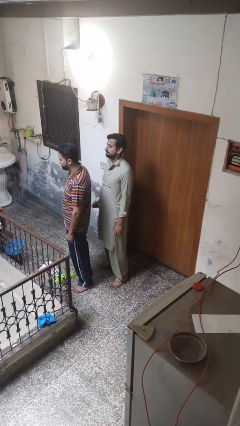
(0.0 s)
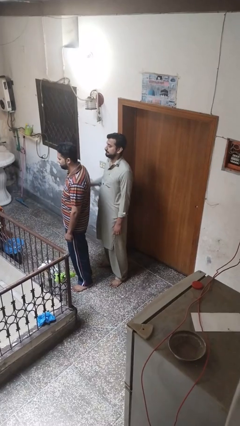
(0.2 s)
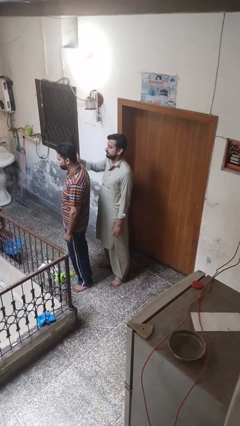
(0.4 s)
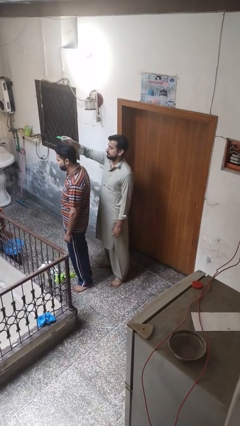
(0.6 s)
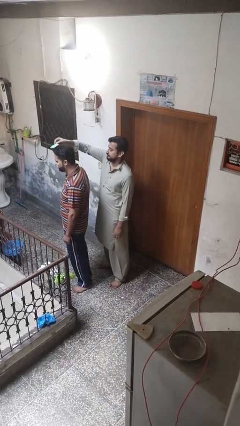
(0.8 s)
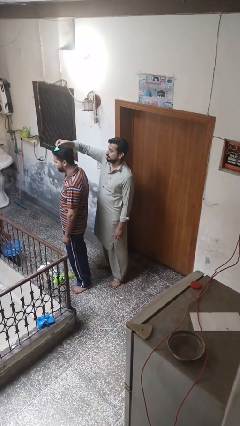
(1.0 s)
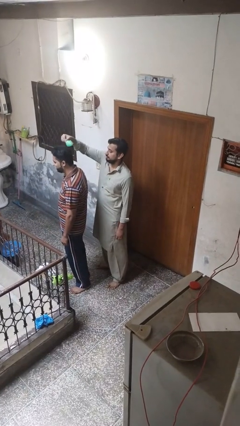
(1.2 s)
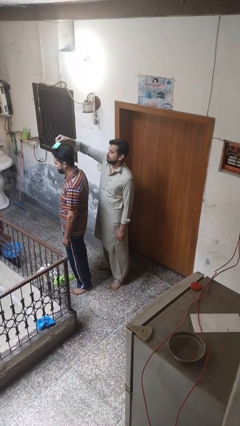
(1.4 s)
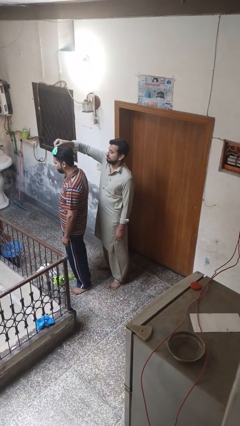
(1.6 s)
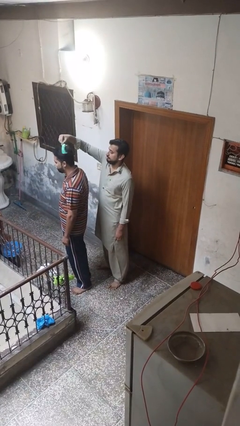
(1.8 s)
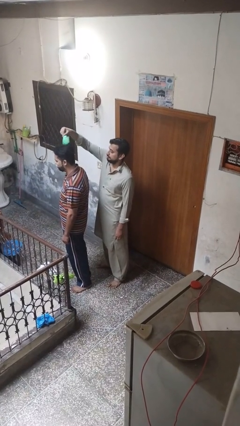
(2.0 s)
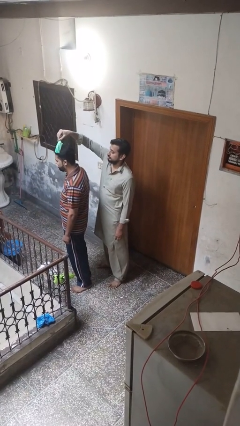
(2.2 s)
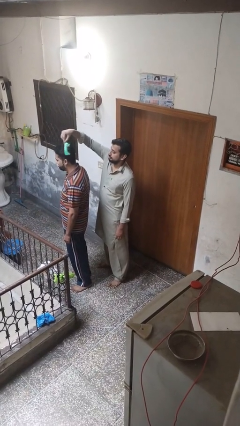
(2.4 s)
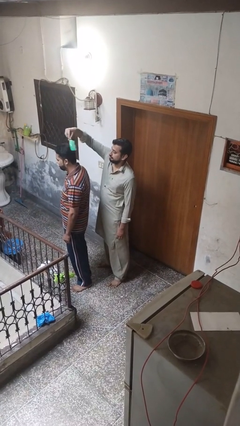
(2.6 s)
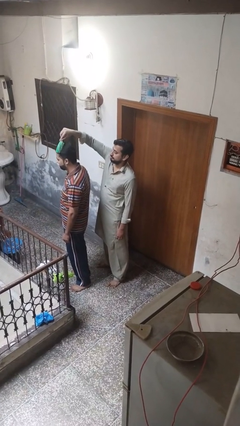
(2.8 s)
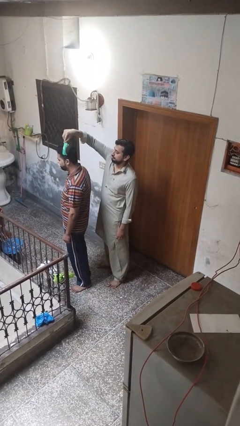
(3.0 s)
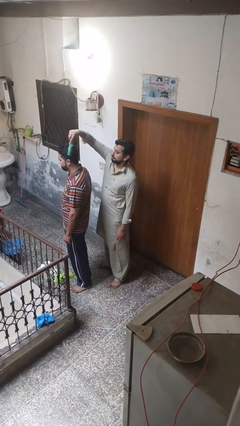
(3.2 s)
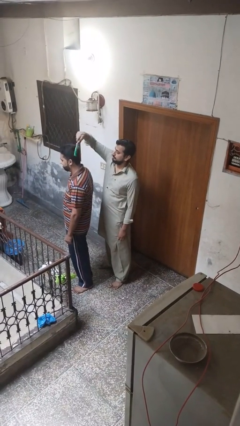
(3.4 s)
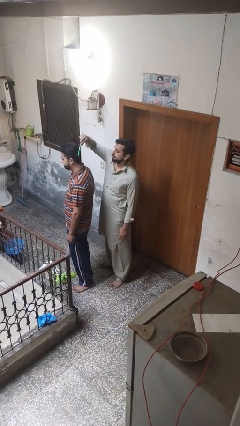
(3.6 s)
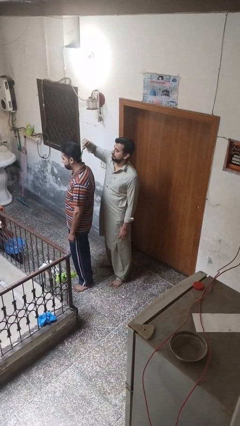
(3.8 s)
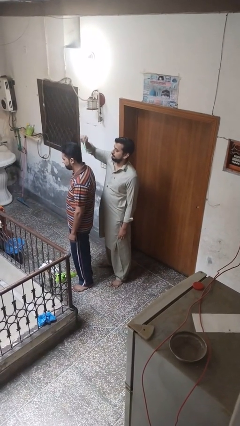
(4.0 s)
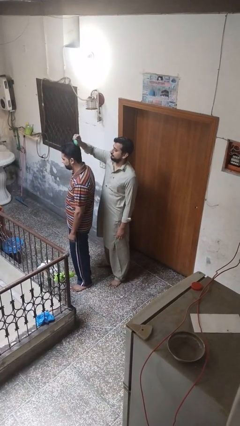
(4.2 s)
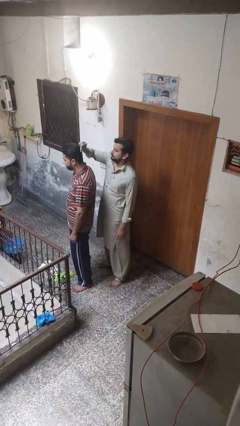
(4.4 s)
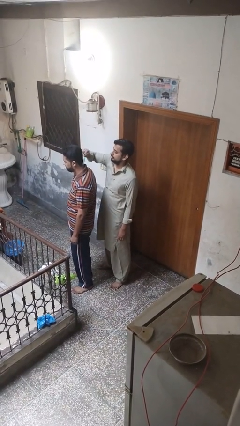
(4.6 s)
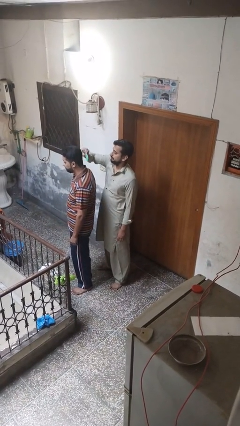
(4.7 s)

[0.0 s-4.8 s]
person brushes hair of person

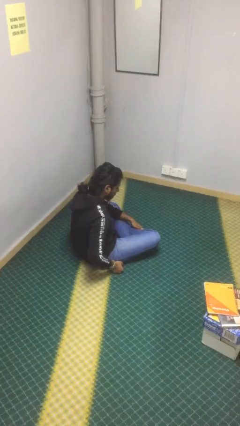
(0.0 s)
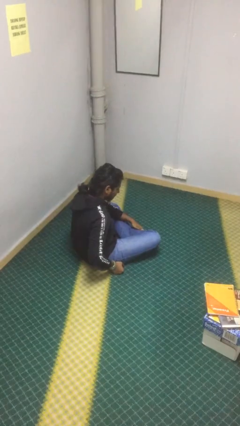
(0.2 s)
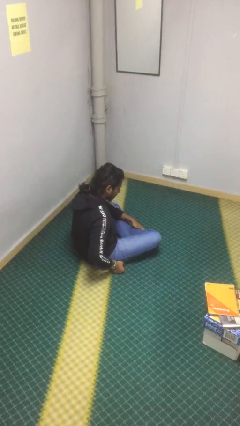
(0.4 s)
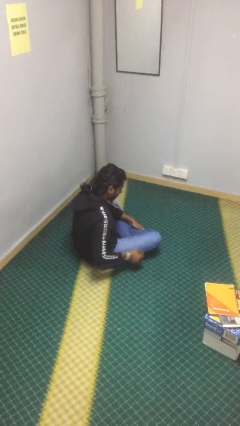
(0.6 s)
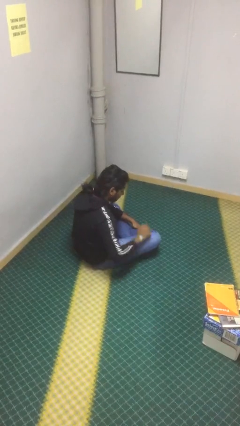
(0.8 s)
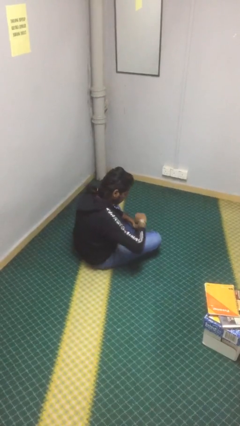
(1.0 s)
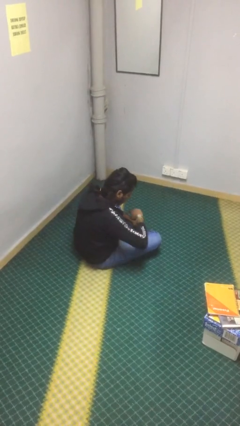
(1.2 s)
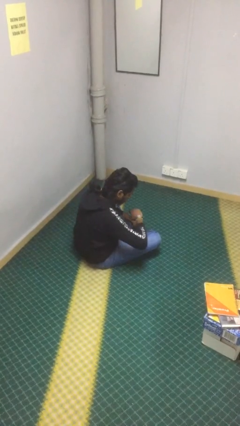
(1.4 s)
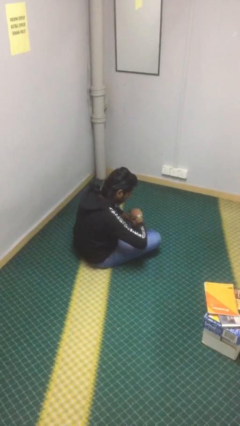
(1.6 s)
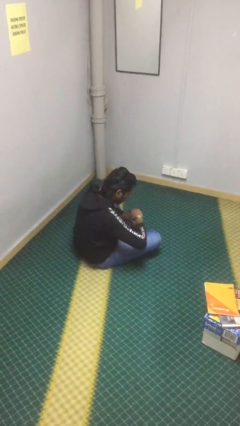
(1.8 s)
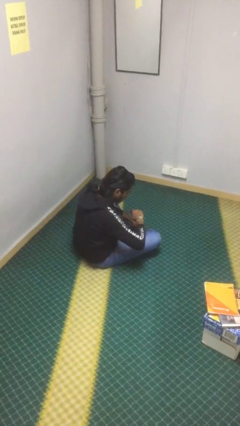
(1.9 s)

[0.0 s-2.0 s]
person looks at wristwatch

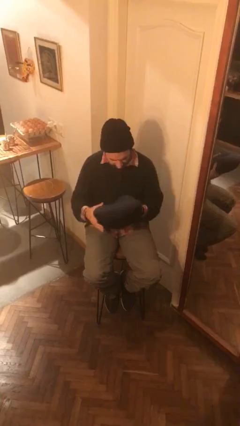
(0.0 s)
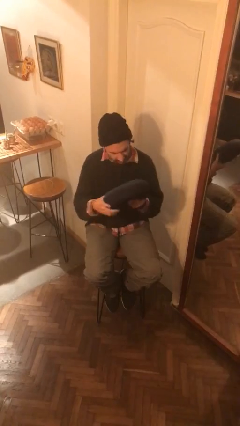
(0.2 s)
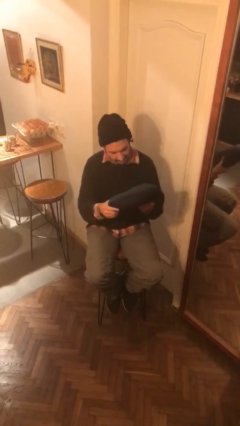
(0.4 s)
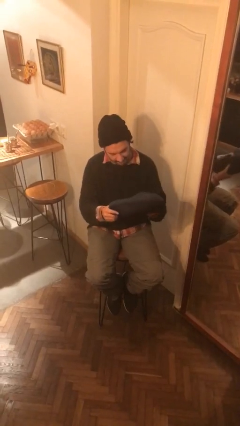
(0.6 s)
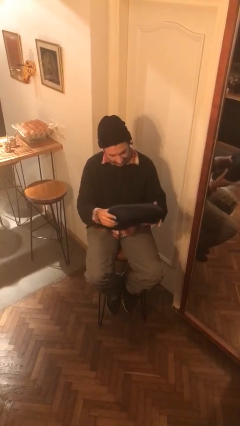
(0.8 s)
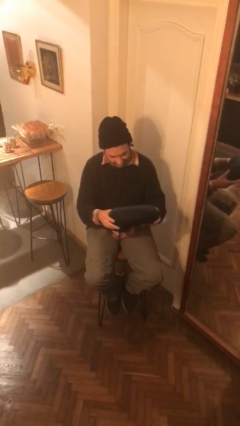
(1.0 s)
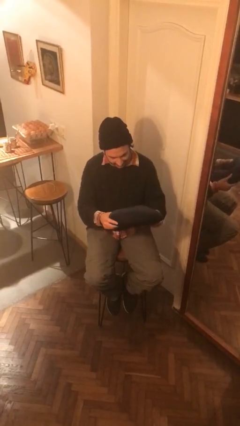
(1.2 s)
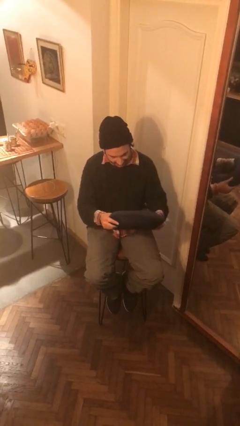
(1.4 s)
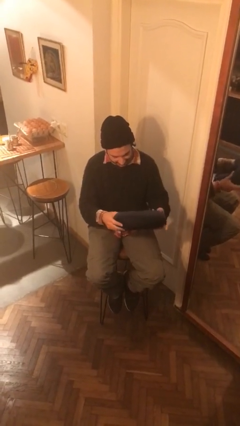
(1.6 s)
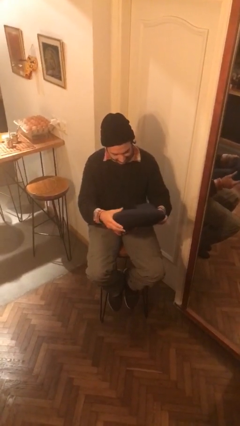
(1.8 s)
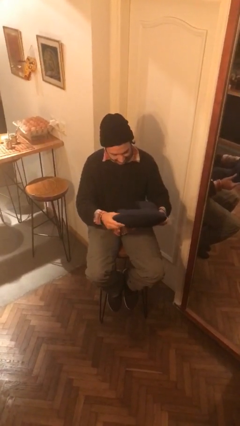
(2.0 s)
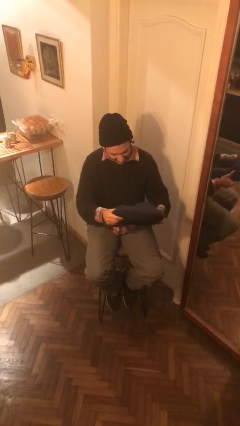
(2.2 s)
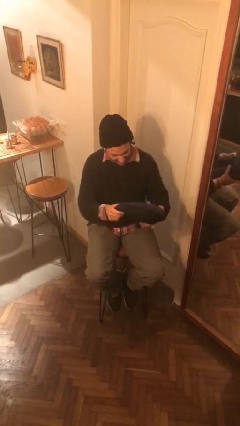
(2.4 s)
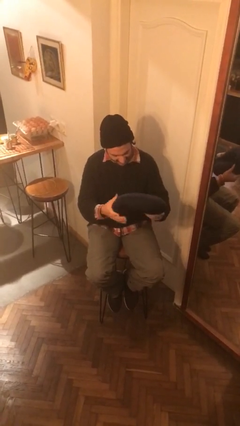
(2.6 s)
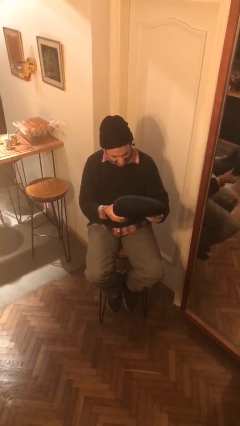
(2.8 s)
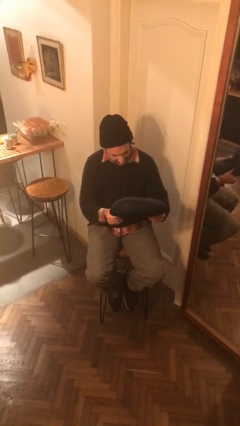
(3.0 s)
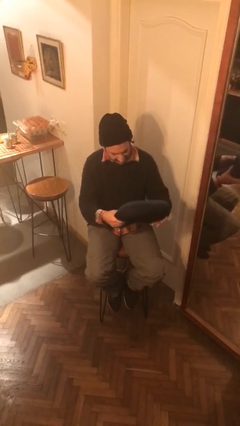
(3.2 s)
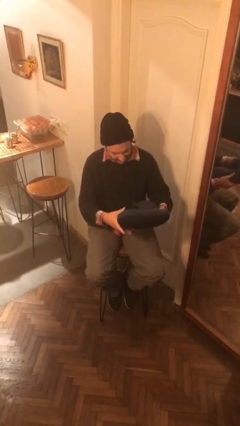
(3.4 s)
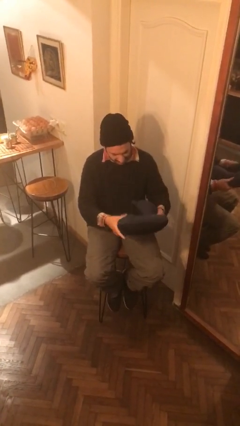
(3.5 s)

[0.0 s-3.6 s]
person squeezes object

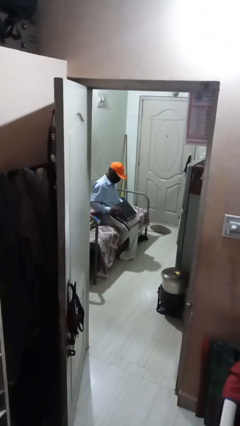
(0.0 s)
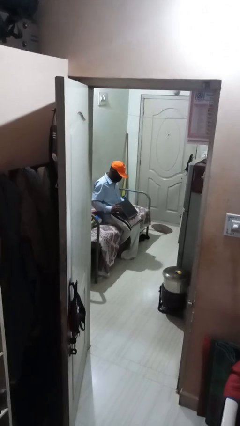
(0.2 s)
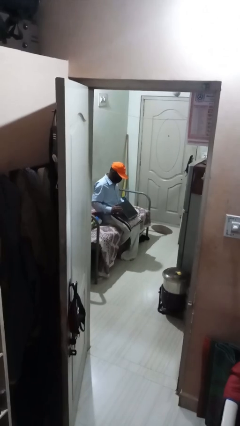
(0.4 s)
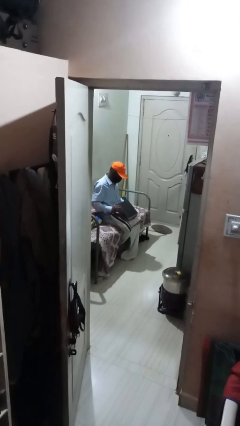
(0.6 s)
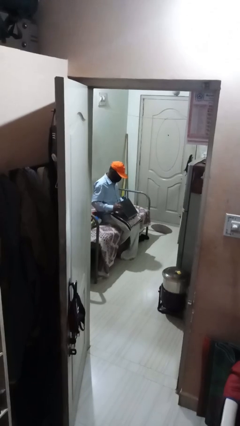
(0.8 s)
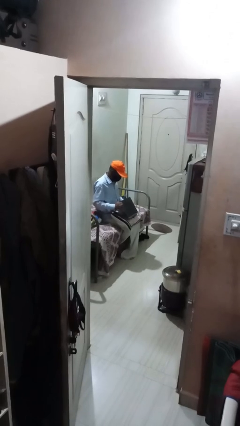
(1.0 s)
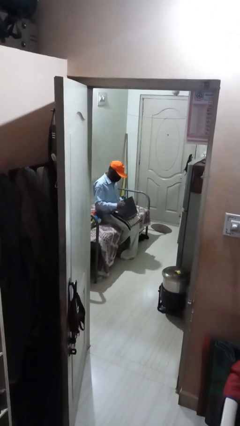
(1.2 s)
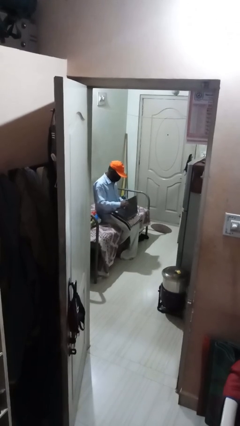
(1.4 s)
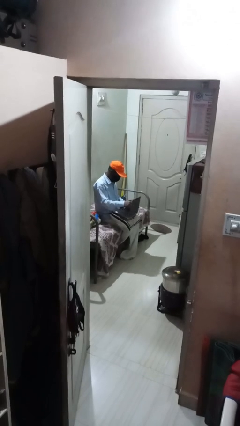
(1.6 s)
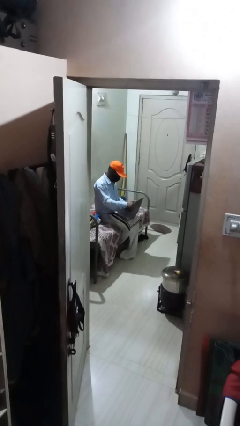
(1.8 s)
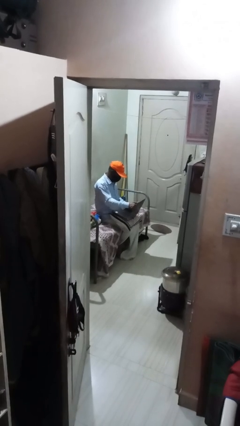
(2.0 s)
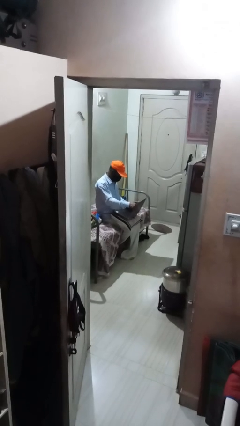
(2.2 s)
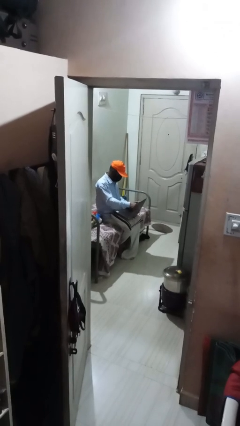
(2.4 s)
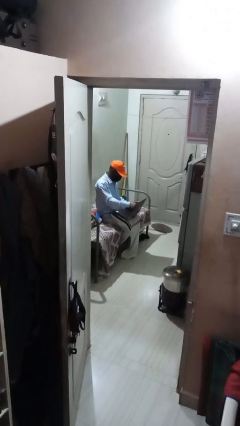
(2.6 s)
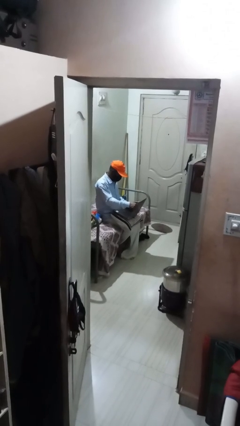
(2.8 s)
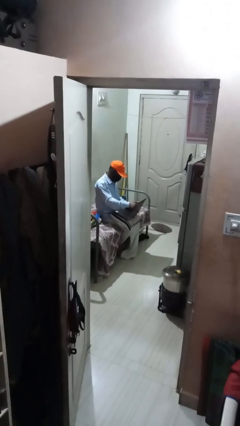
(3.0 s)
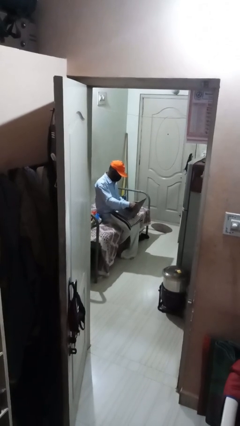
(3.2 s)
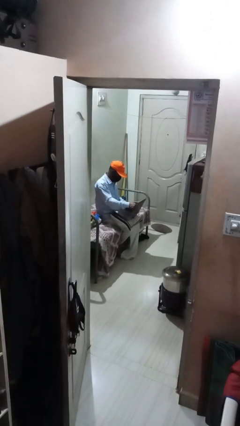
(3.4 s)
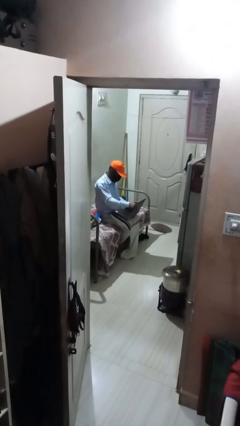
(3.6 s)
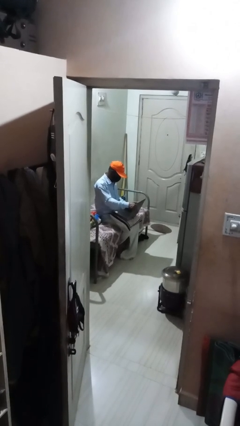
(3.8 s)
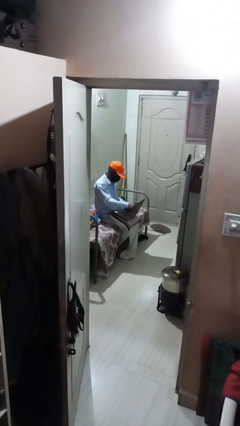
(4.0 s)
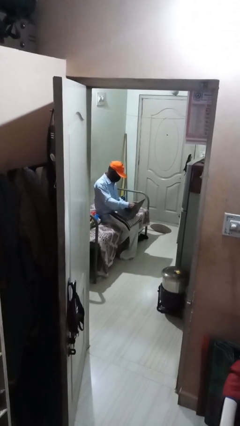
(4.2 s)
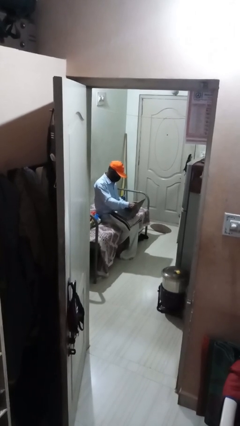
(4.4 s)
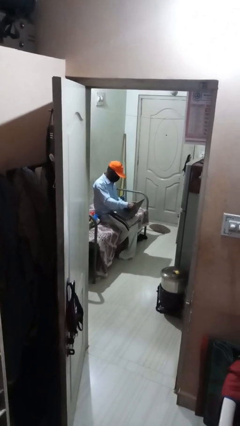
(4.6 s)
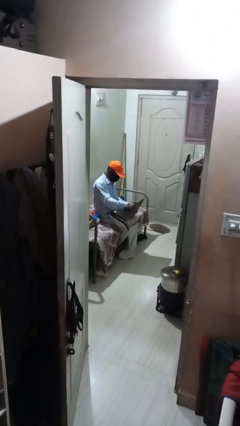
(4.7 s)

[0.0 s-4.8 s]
person interacts with laptop

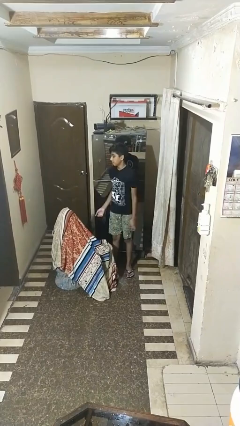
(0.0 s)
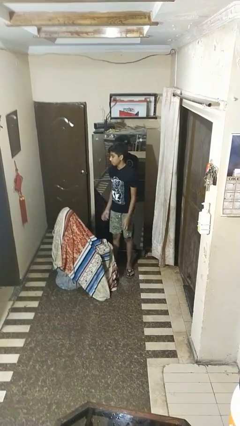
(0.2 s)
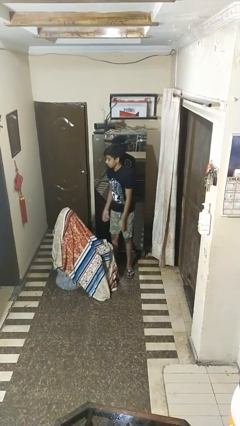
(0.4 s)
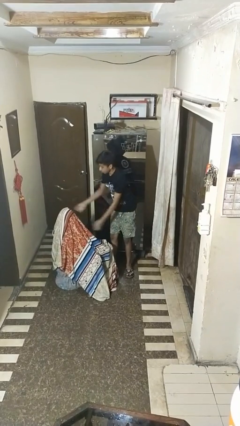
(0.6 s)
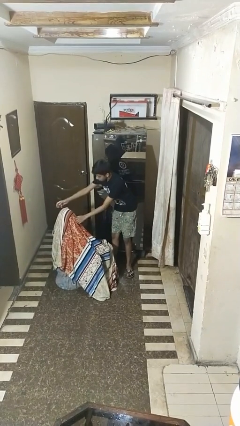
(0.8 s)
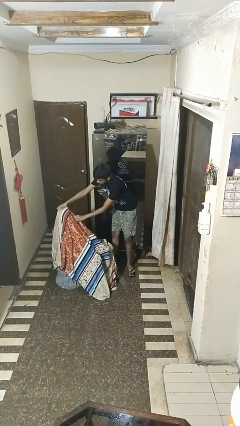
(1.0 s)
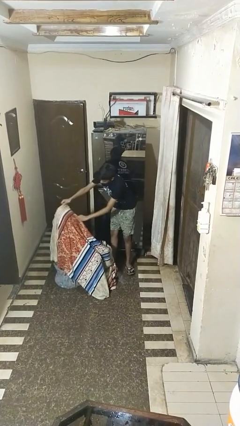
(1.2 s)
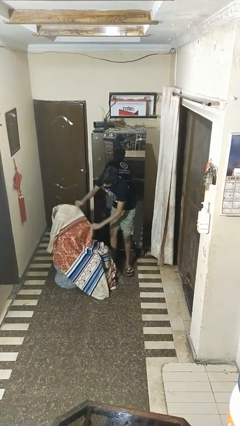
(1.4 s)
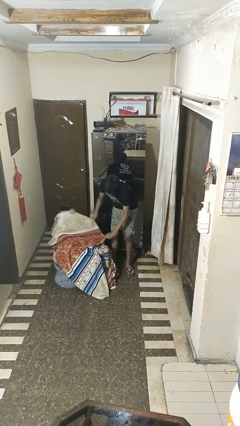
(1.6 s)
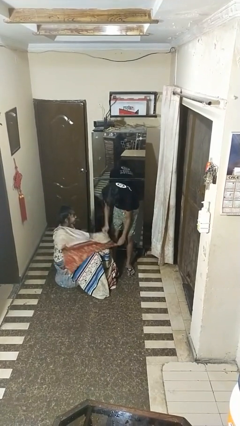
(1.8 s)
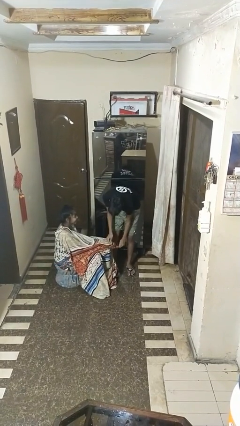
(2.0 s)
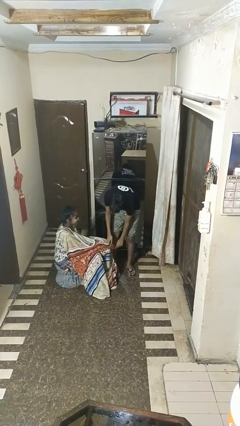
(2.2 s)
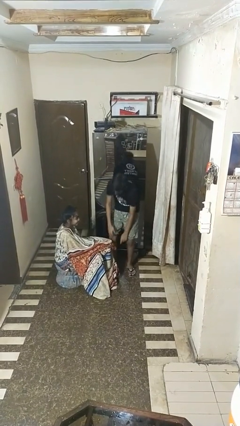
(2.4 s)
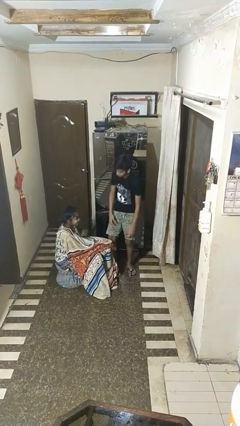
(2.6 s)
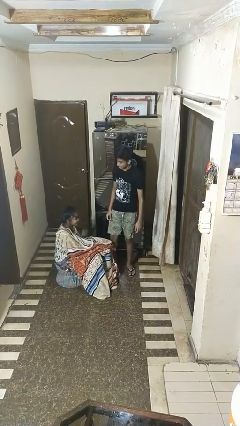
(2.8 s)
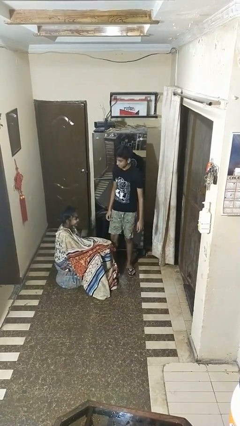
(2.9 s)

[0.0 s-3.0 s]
person uncovers friend with blanket
